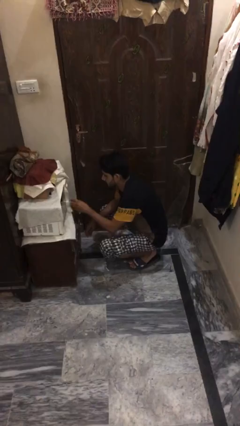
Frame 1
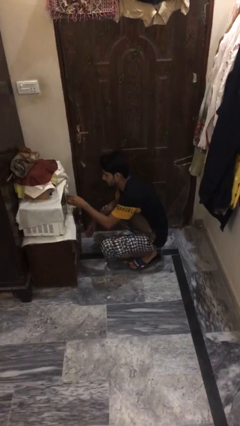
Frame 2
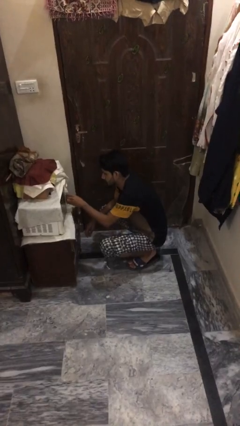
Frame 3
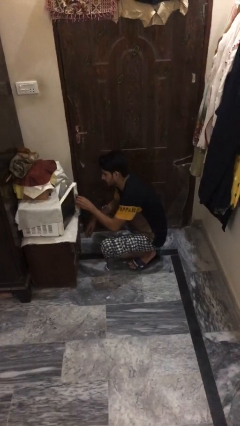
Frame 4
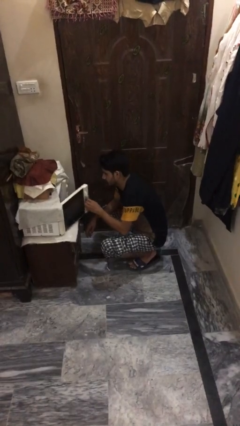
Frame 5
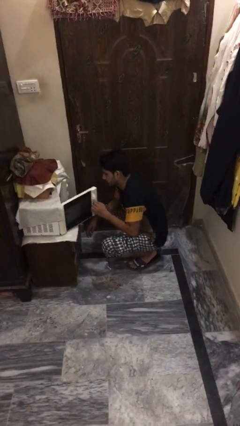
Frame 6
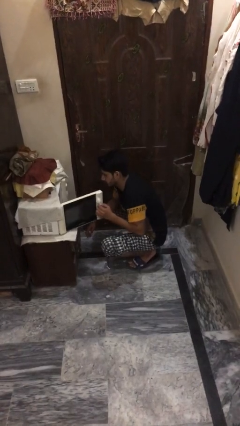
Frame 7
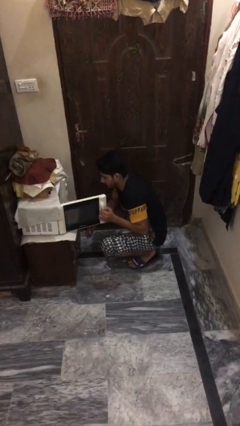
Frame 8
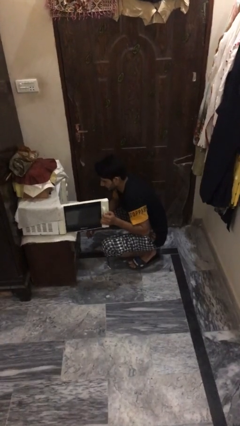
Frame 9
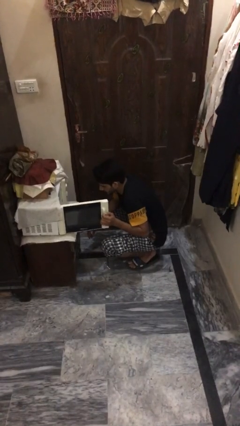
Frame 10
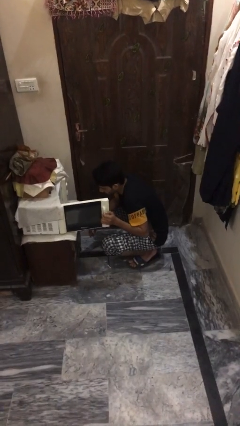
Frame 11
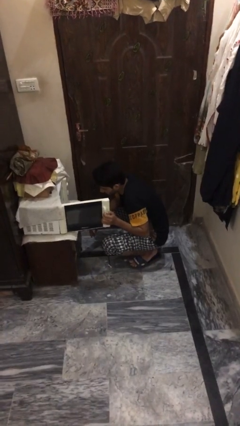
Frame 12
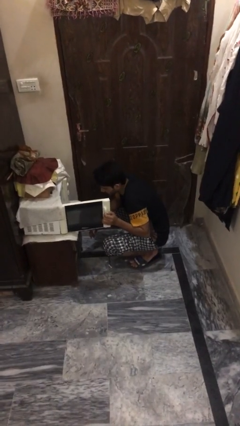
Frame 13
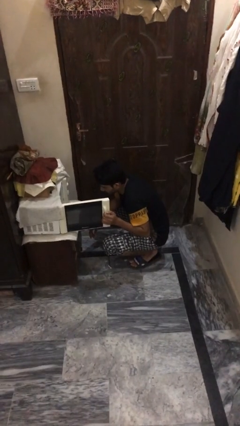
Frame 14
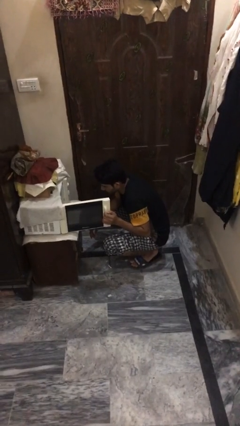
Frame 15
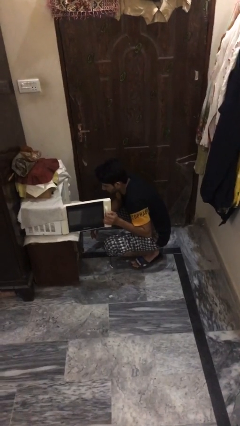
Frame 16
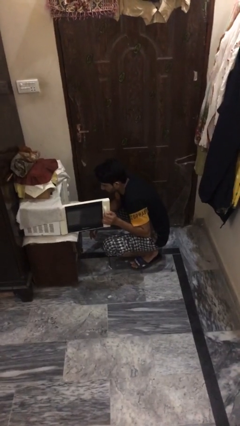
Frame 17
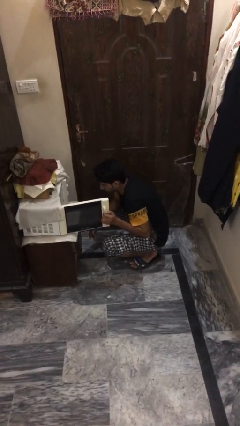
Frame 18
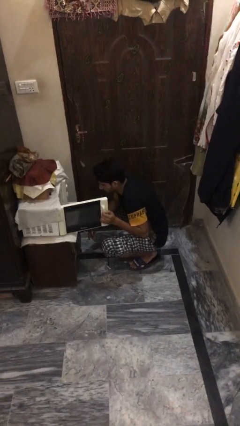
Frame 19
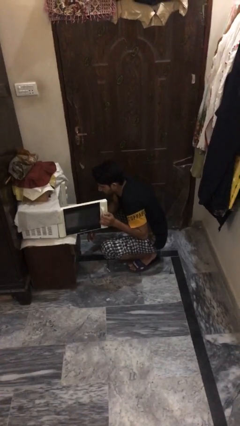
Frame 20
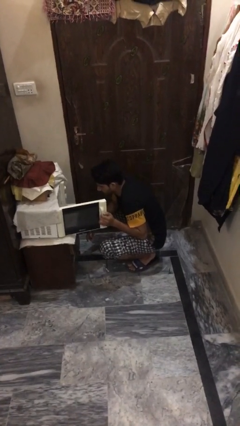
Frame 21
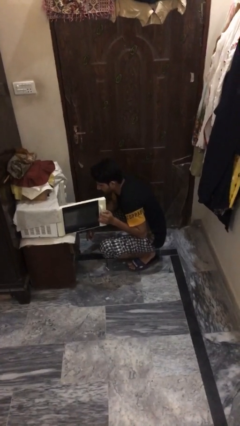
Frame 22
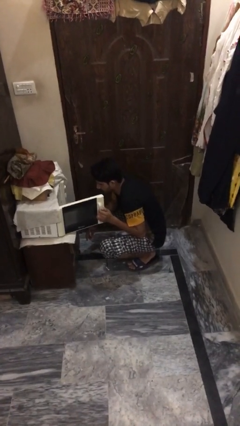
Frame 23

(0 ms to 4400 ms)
person opens microwave

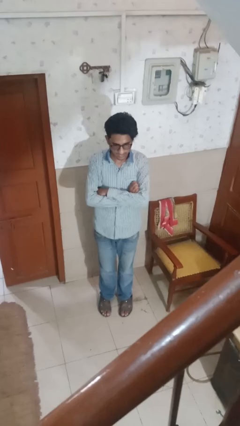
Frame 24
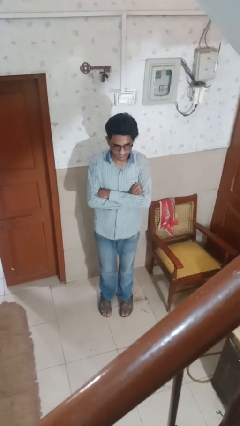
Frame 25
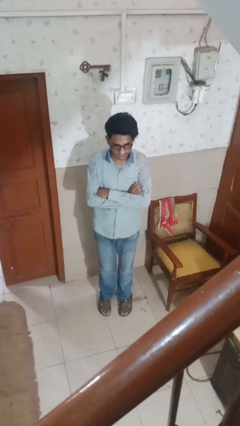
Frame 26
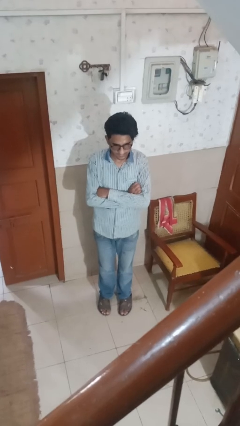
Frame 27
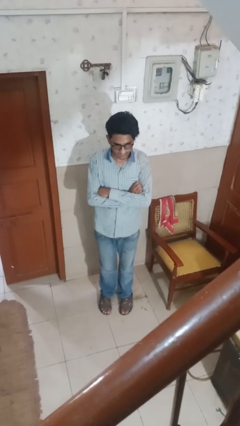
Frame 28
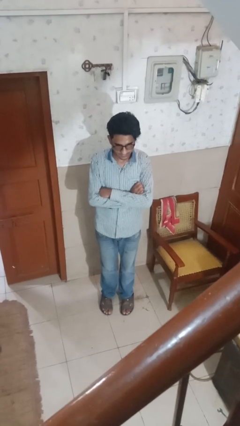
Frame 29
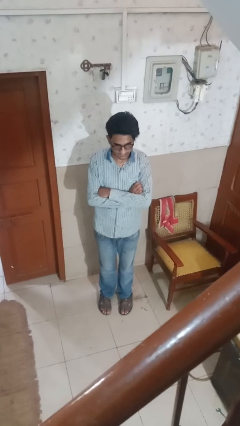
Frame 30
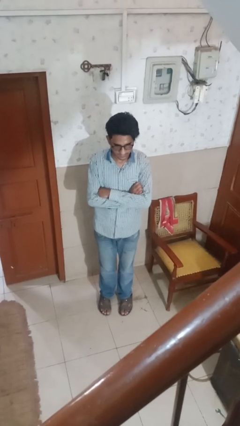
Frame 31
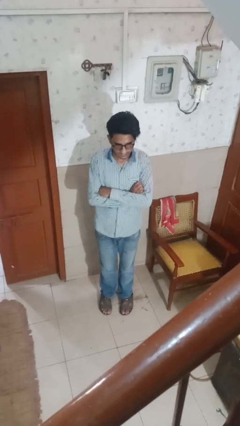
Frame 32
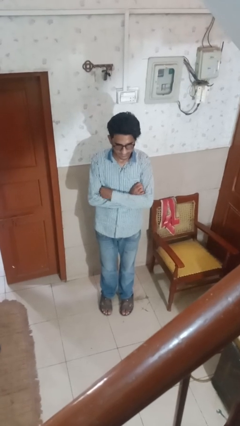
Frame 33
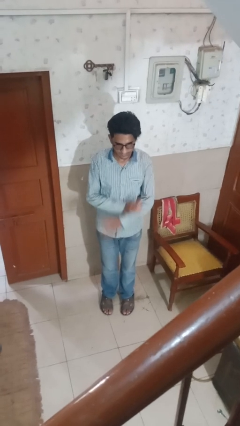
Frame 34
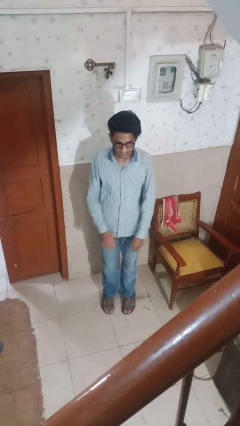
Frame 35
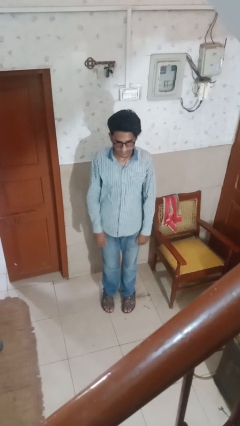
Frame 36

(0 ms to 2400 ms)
person crosses arms

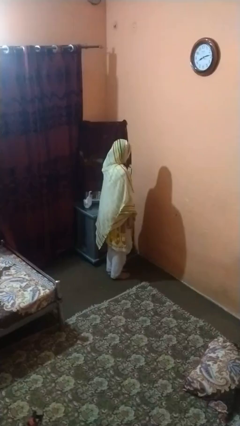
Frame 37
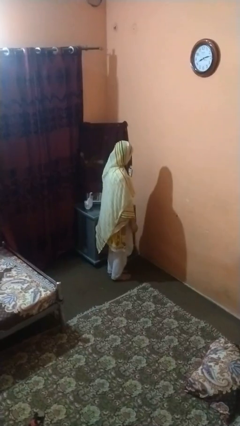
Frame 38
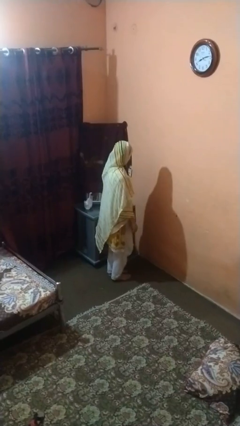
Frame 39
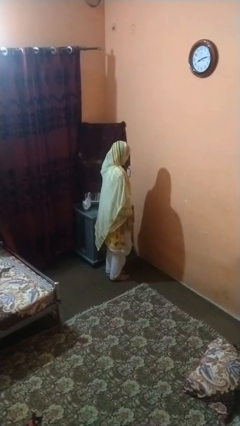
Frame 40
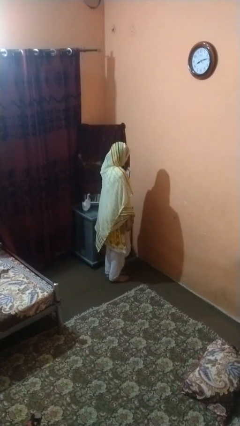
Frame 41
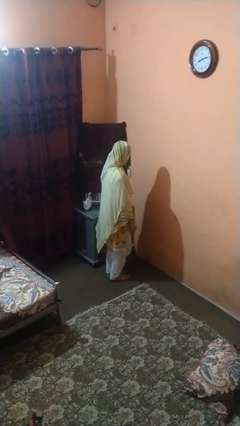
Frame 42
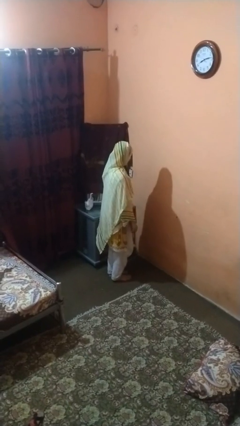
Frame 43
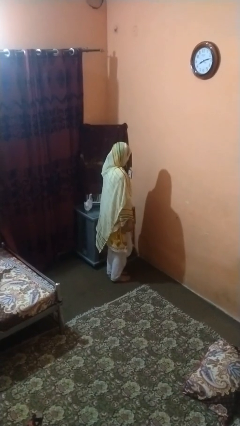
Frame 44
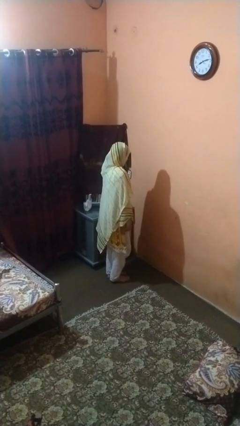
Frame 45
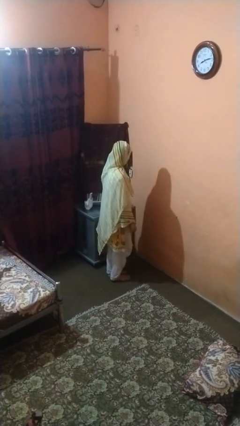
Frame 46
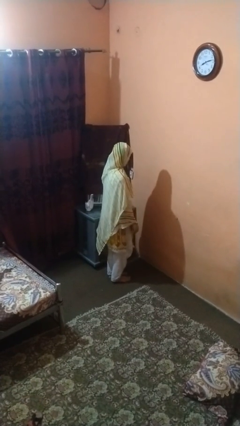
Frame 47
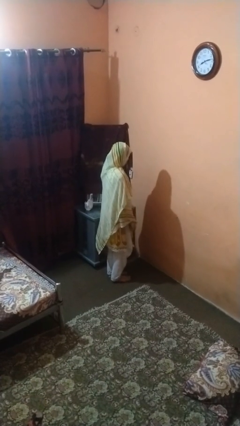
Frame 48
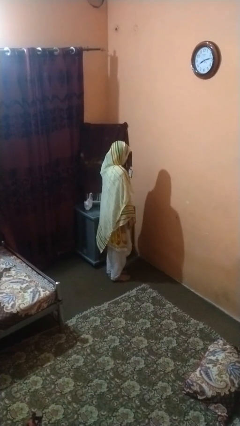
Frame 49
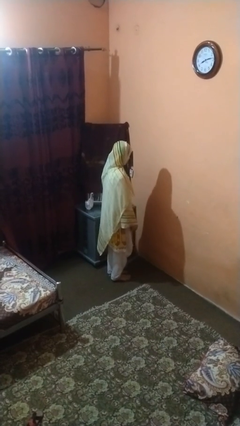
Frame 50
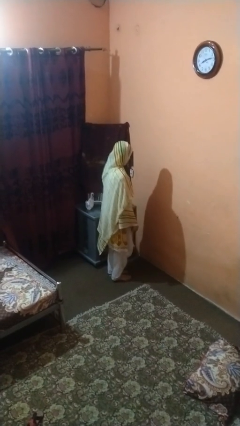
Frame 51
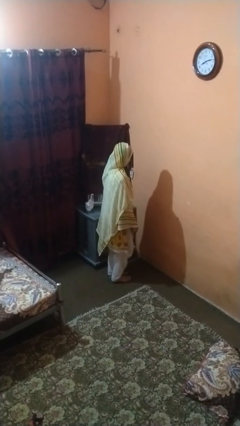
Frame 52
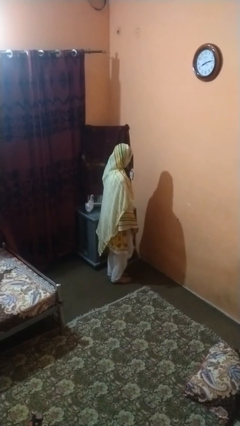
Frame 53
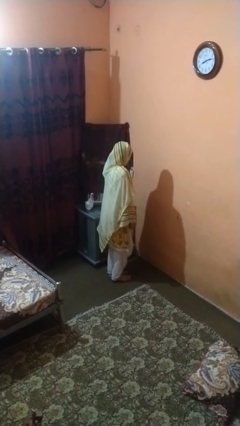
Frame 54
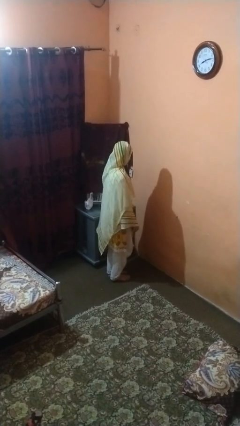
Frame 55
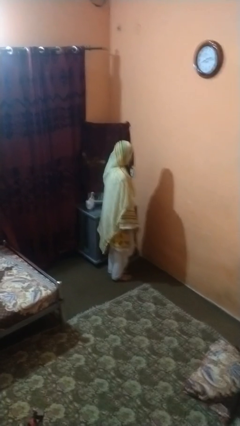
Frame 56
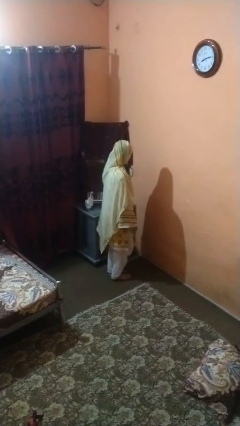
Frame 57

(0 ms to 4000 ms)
person shrugs

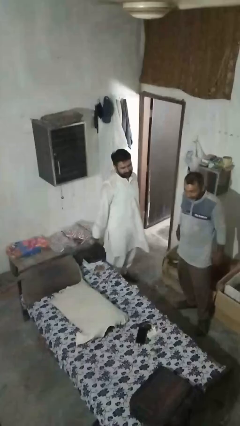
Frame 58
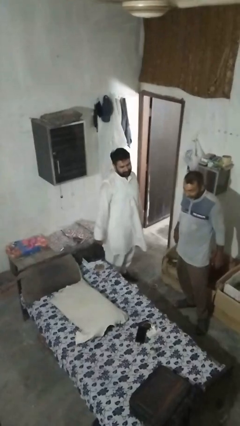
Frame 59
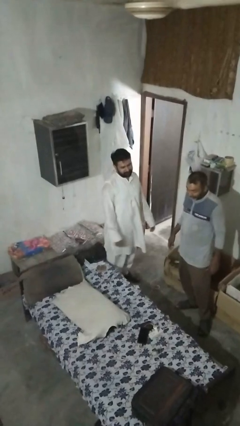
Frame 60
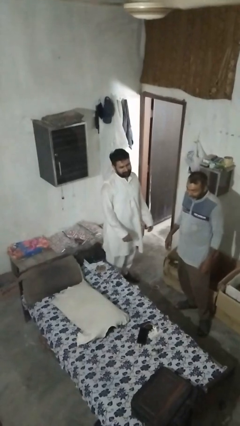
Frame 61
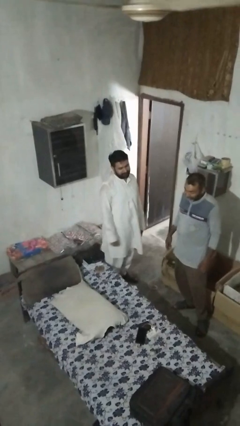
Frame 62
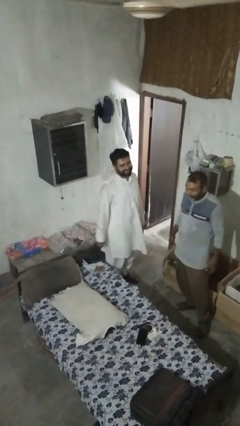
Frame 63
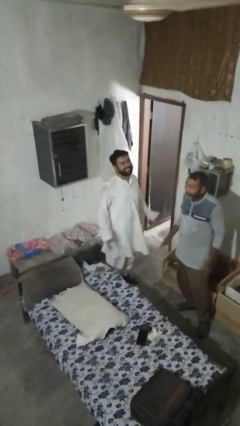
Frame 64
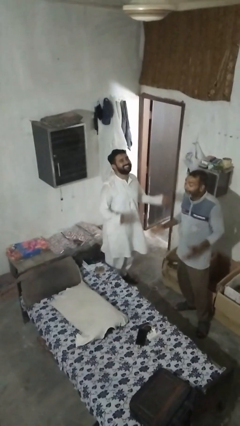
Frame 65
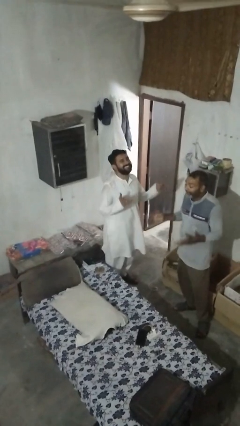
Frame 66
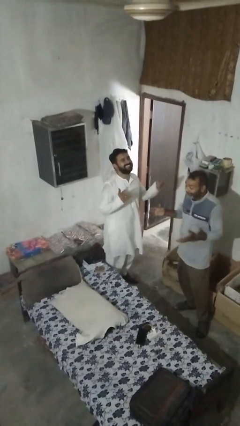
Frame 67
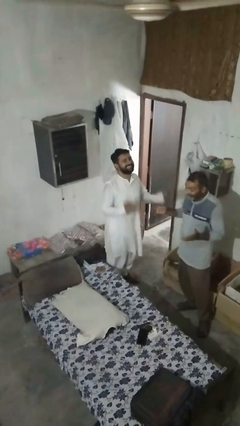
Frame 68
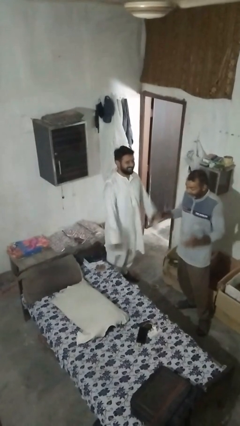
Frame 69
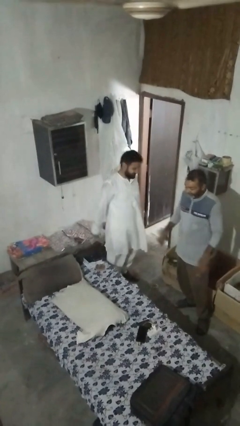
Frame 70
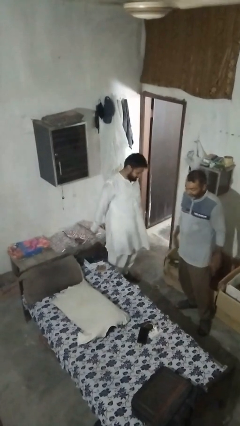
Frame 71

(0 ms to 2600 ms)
person laughs with person

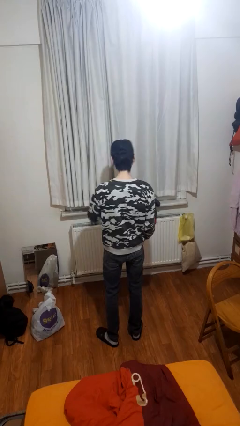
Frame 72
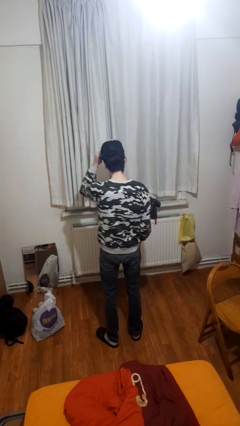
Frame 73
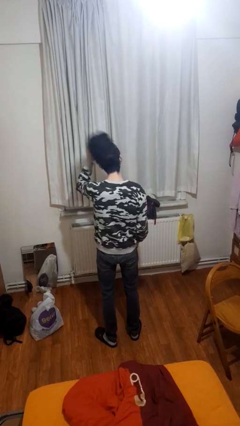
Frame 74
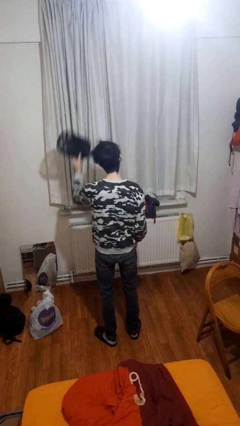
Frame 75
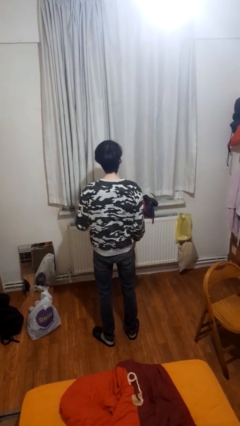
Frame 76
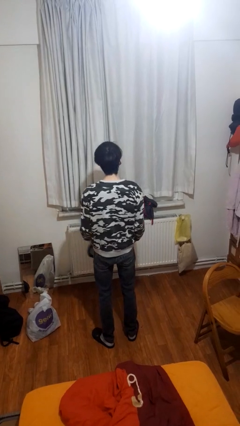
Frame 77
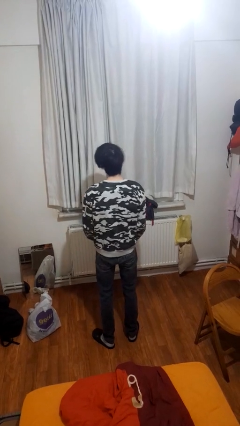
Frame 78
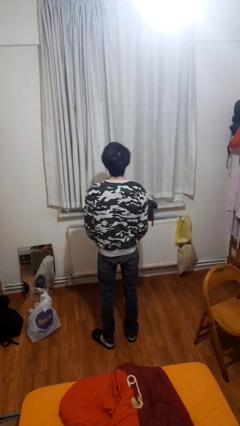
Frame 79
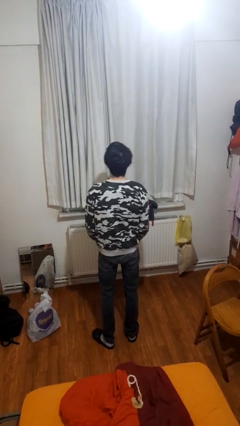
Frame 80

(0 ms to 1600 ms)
person takes off hat

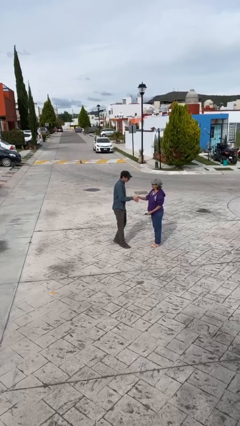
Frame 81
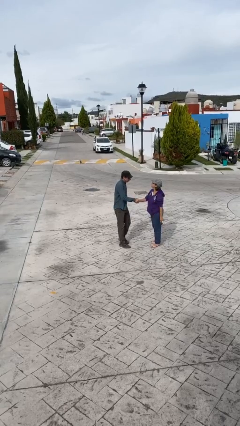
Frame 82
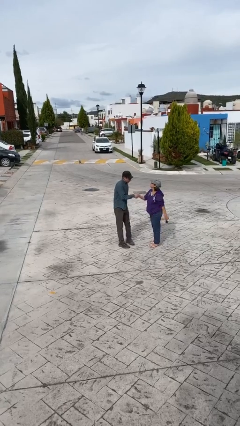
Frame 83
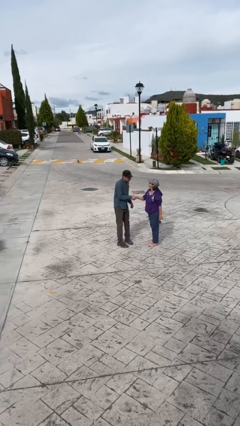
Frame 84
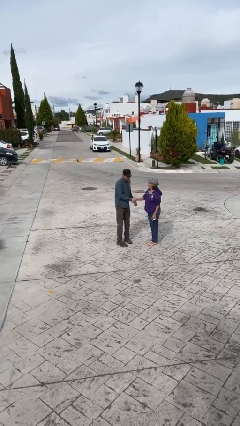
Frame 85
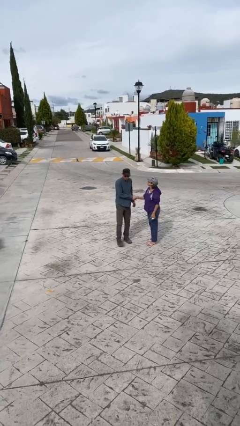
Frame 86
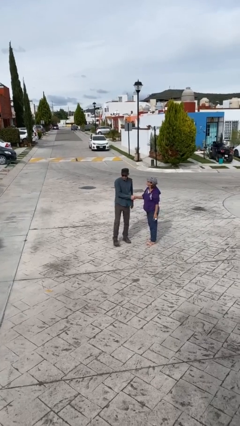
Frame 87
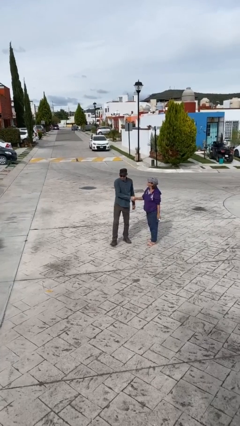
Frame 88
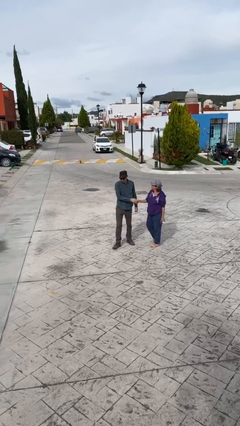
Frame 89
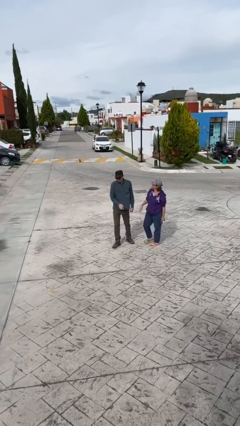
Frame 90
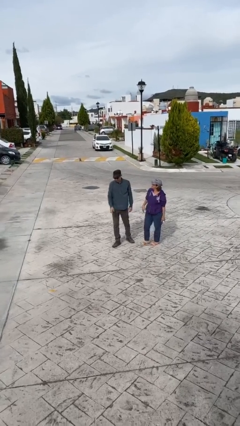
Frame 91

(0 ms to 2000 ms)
person shakes hand
